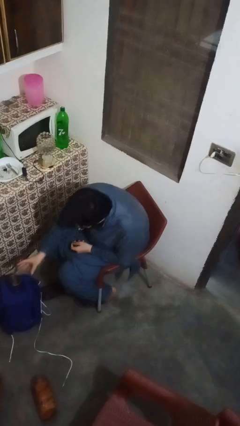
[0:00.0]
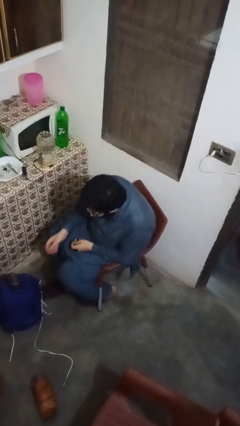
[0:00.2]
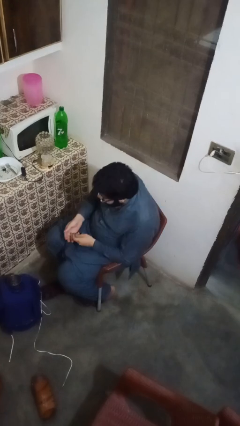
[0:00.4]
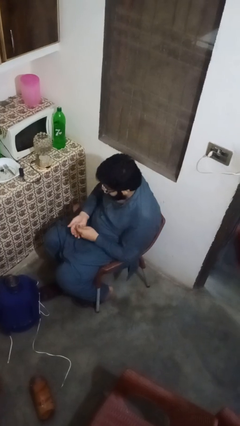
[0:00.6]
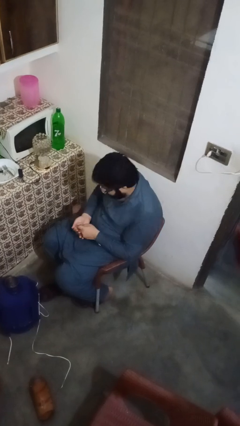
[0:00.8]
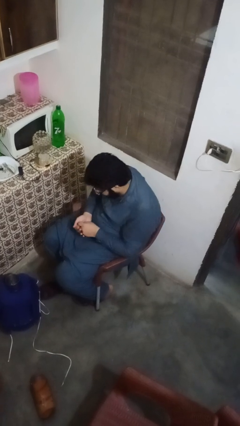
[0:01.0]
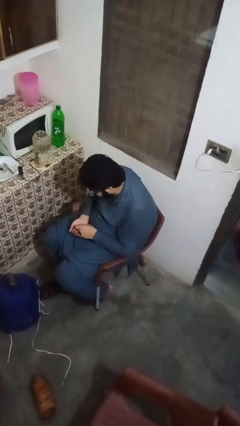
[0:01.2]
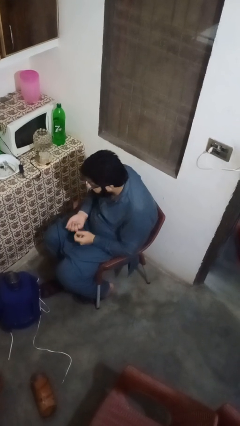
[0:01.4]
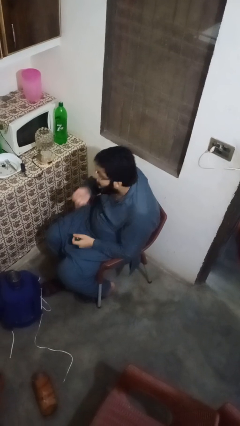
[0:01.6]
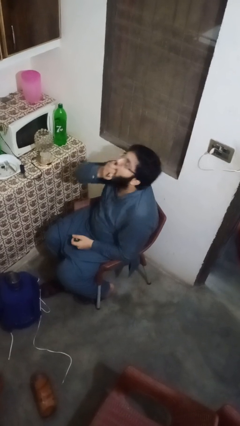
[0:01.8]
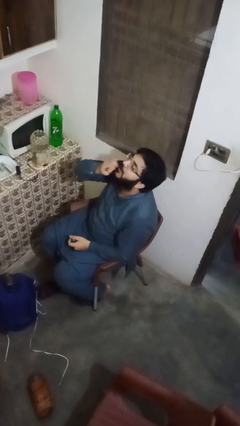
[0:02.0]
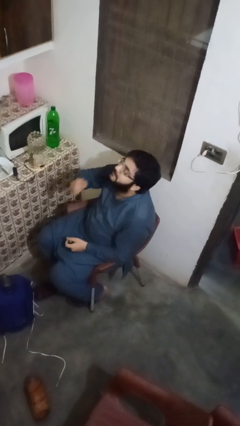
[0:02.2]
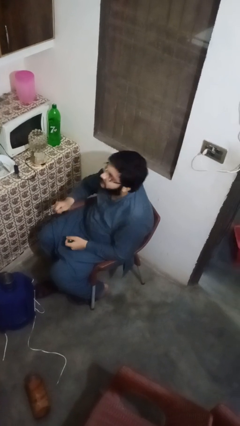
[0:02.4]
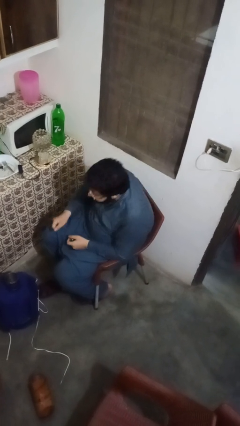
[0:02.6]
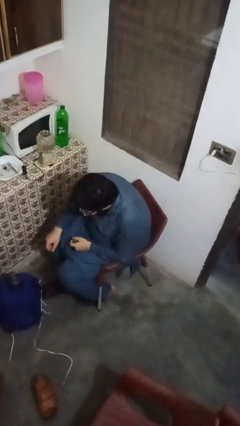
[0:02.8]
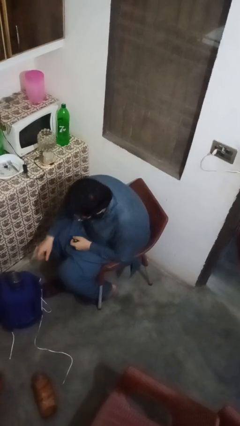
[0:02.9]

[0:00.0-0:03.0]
person takes medicine pills

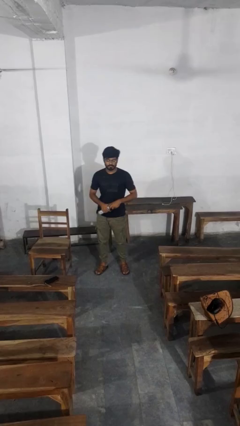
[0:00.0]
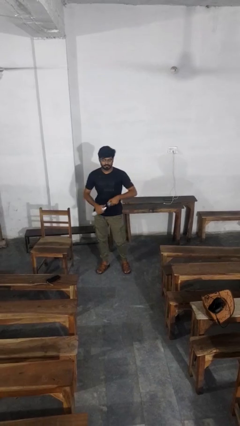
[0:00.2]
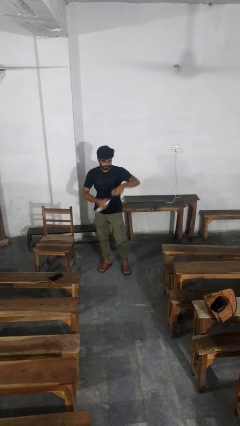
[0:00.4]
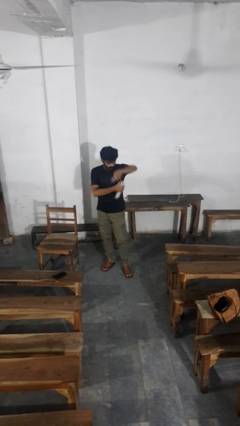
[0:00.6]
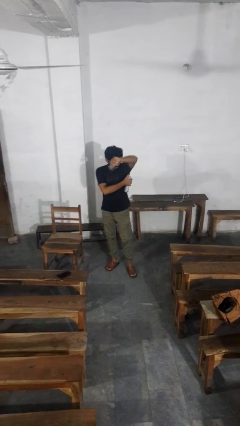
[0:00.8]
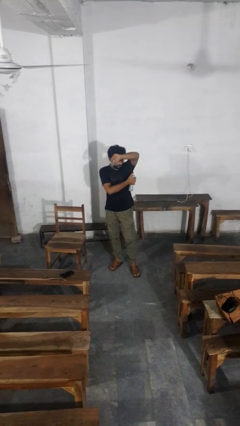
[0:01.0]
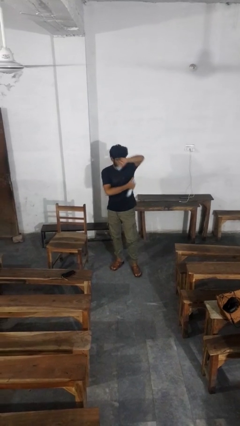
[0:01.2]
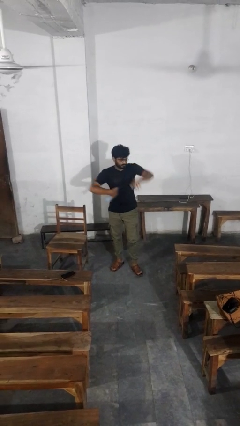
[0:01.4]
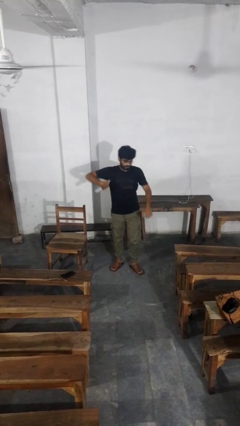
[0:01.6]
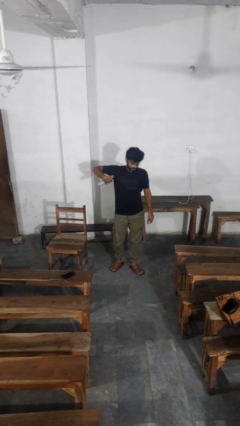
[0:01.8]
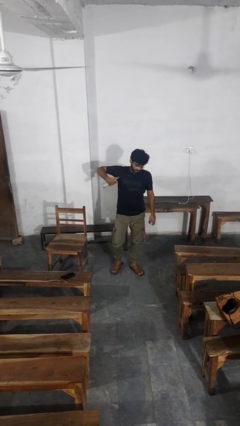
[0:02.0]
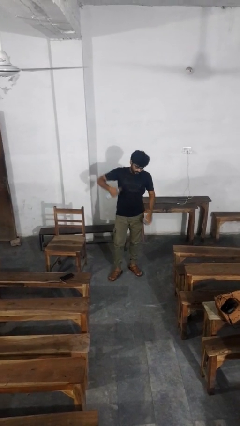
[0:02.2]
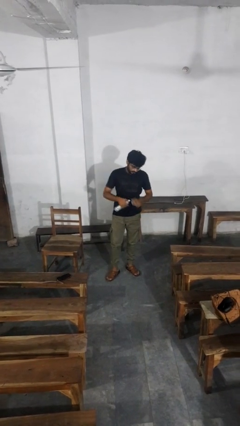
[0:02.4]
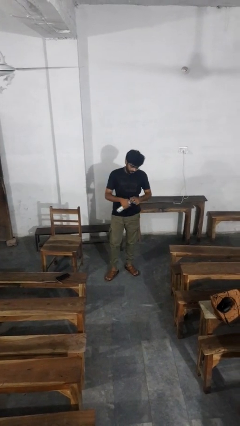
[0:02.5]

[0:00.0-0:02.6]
person applies deodorant

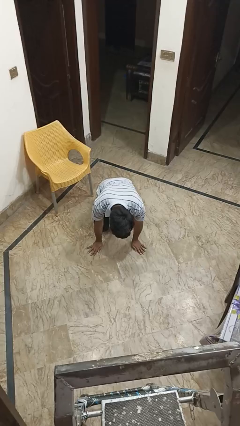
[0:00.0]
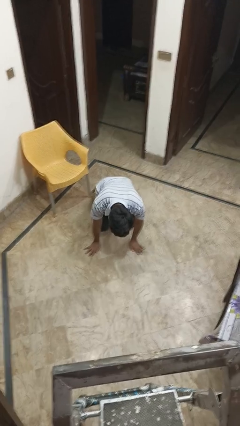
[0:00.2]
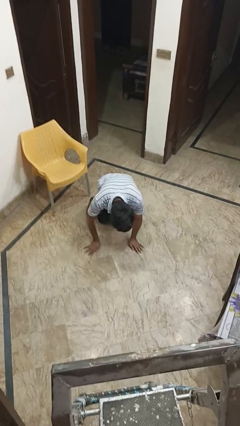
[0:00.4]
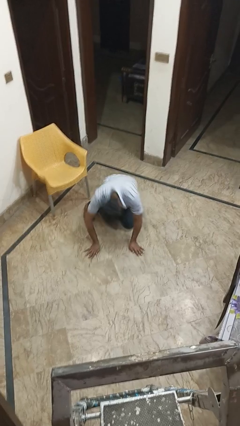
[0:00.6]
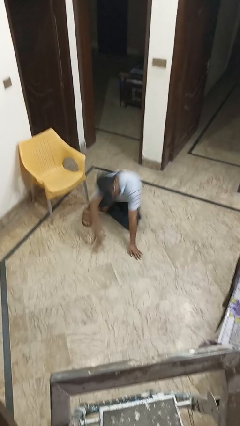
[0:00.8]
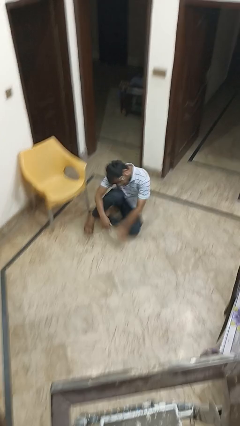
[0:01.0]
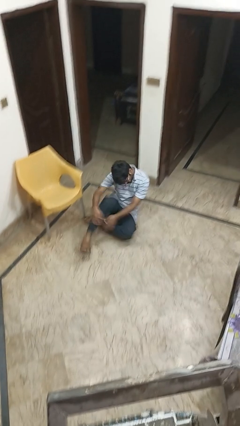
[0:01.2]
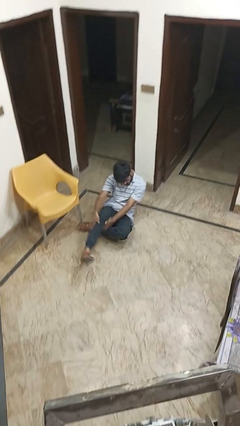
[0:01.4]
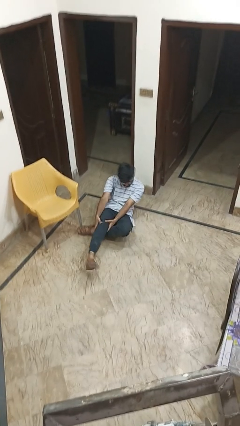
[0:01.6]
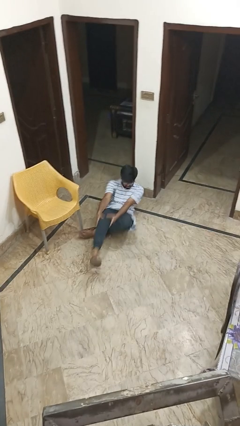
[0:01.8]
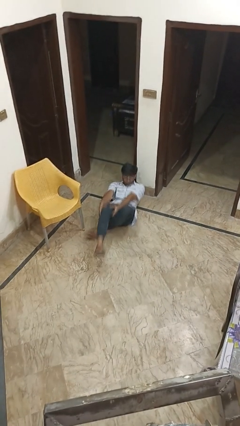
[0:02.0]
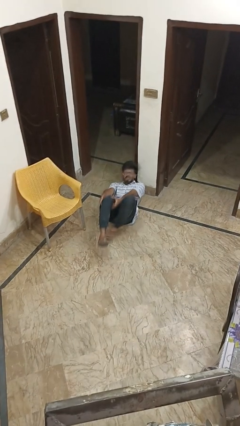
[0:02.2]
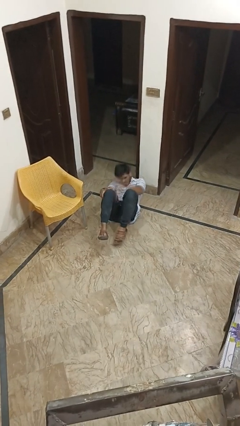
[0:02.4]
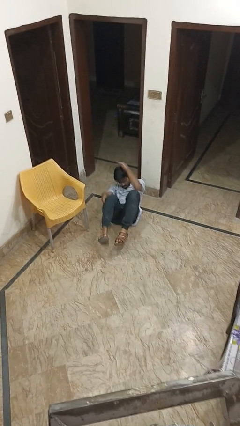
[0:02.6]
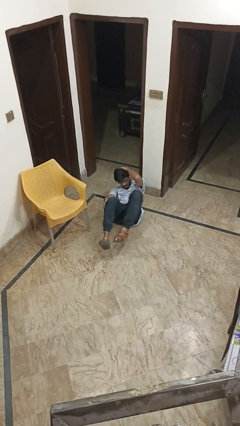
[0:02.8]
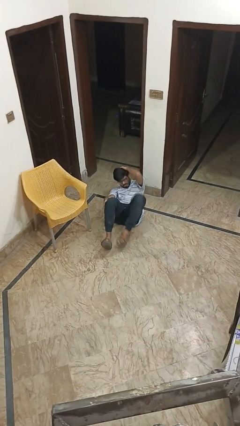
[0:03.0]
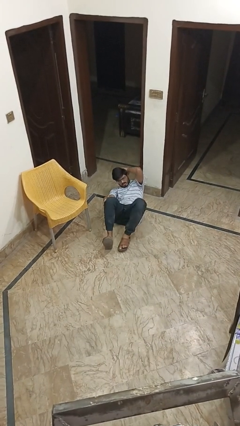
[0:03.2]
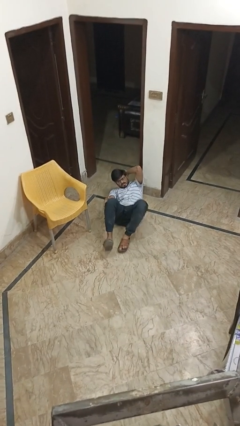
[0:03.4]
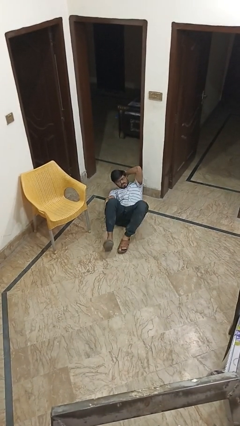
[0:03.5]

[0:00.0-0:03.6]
person lies down on floor

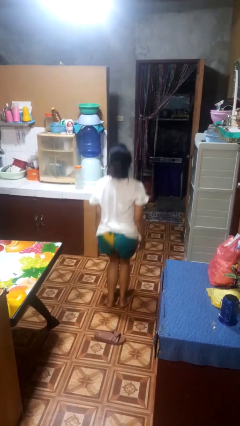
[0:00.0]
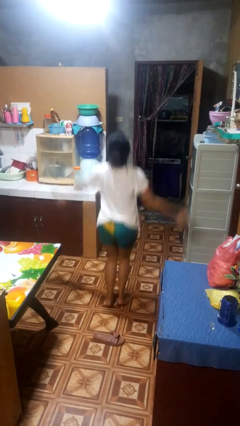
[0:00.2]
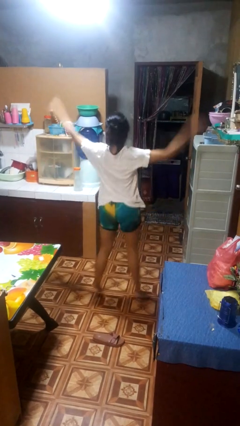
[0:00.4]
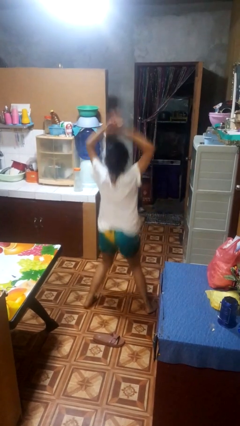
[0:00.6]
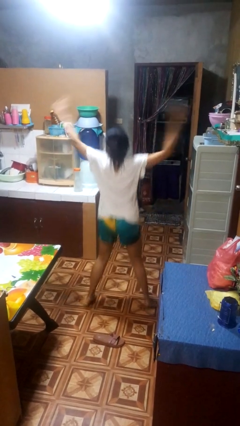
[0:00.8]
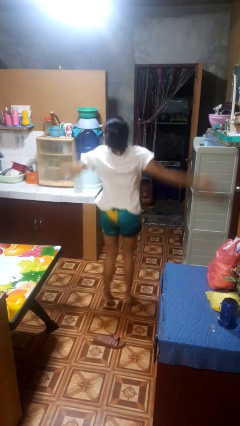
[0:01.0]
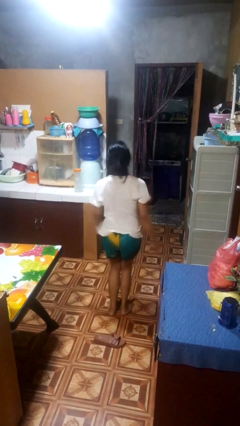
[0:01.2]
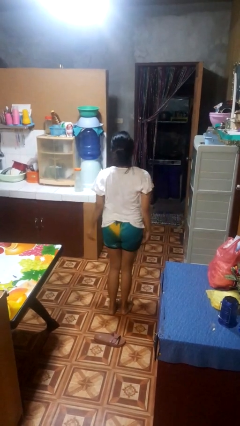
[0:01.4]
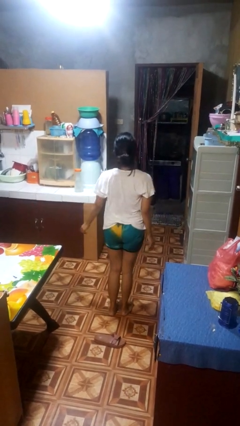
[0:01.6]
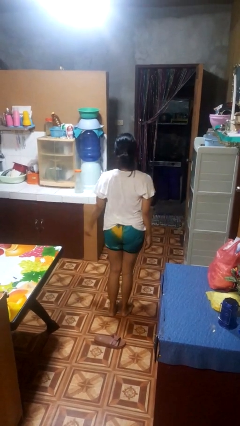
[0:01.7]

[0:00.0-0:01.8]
person exercises with jumping jacks

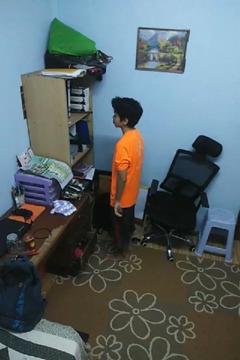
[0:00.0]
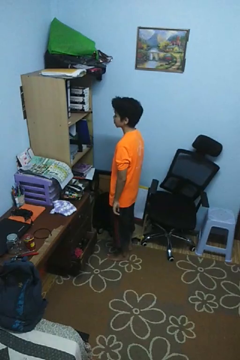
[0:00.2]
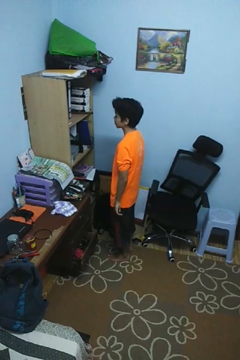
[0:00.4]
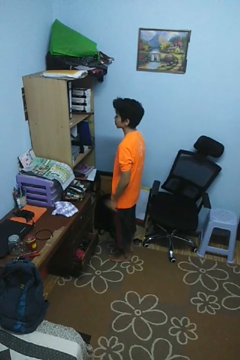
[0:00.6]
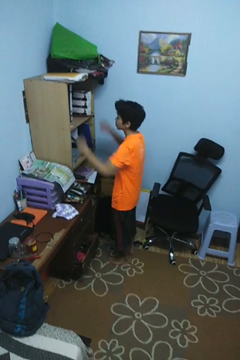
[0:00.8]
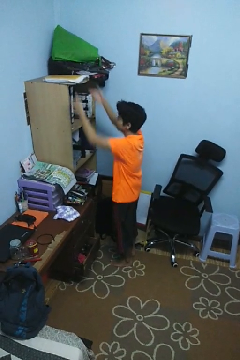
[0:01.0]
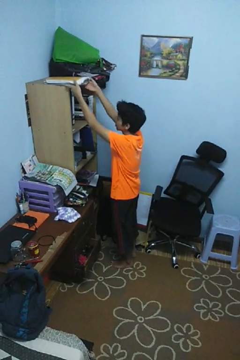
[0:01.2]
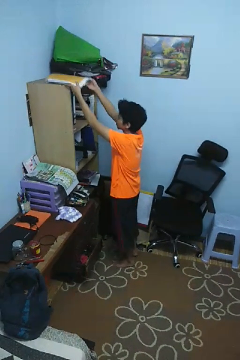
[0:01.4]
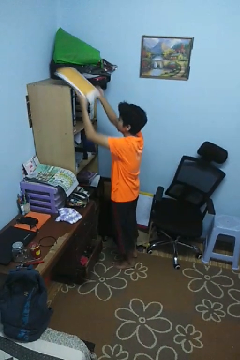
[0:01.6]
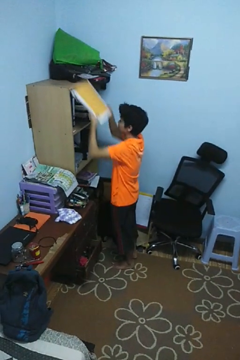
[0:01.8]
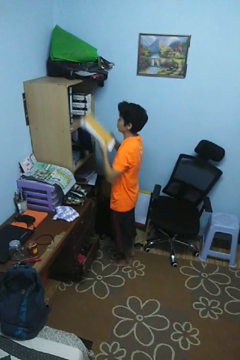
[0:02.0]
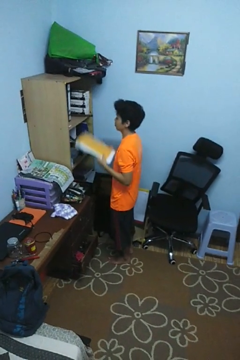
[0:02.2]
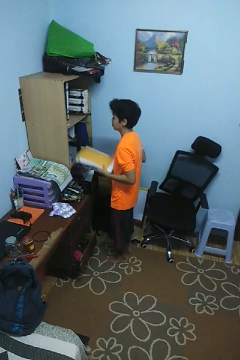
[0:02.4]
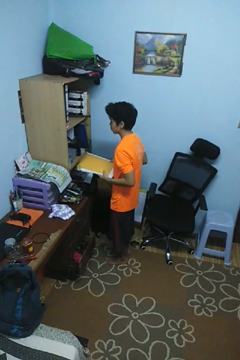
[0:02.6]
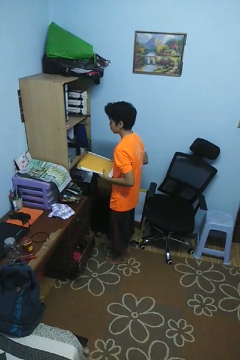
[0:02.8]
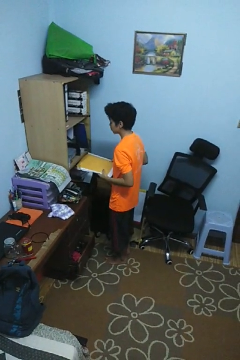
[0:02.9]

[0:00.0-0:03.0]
person picks up object from shelf

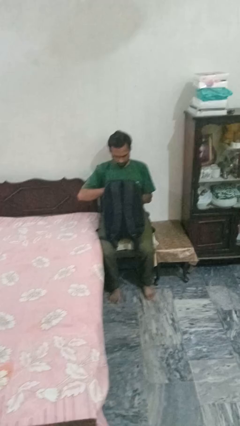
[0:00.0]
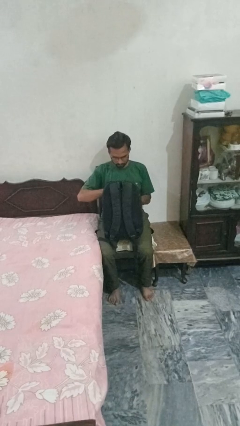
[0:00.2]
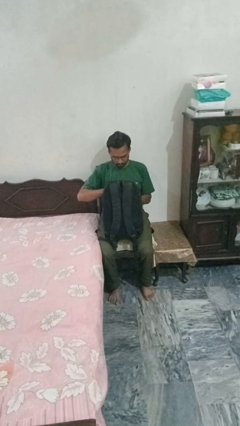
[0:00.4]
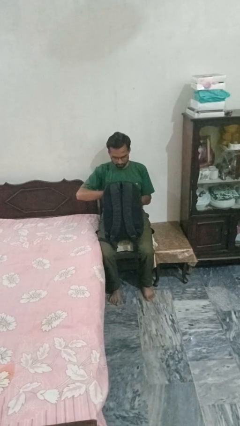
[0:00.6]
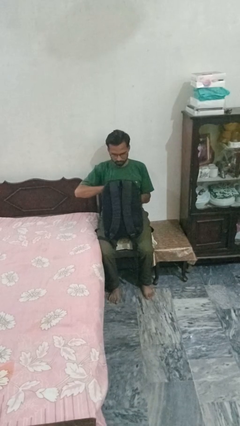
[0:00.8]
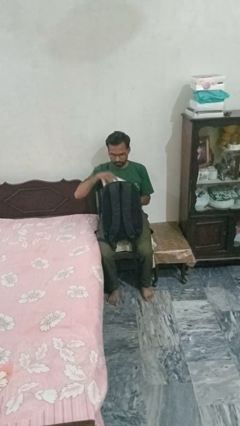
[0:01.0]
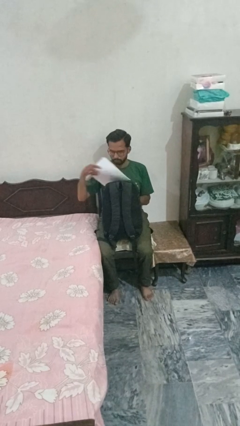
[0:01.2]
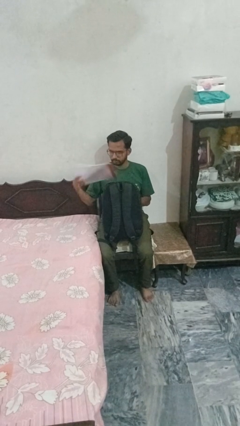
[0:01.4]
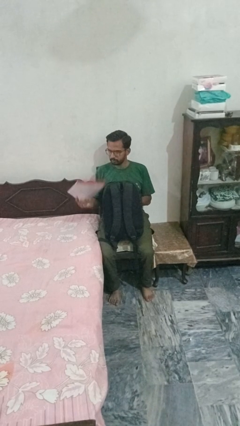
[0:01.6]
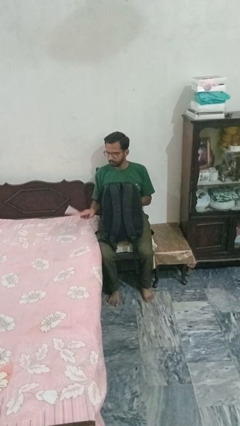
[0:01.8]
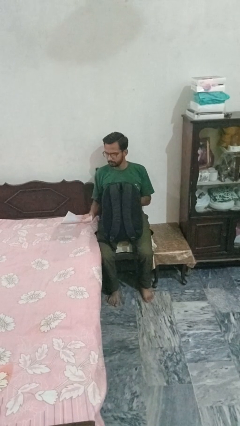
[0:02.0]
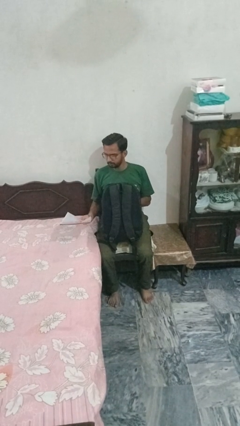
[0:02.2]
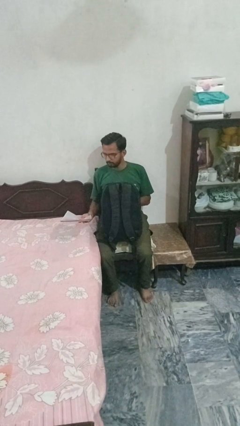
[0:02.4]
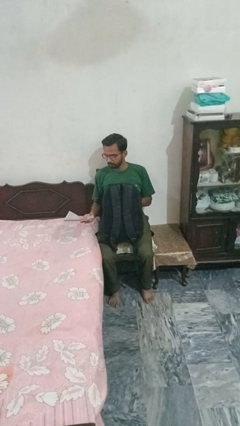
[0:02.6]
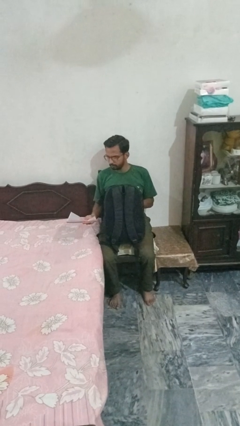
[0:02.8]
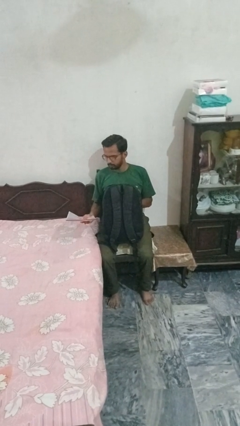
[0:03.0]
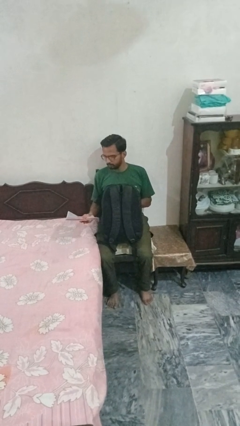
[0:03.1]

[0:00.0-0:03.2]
person takes object from backpack

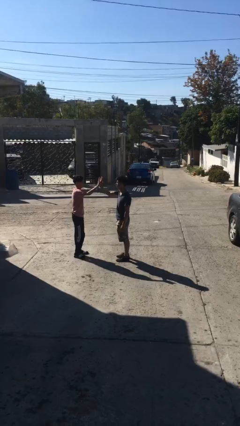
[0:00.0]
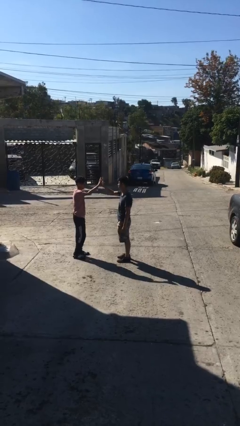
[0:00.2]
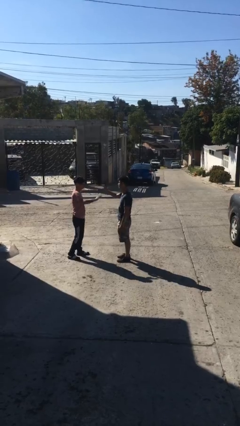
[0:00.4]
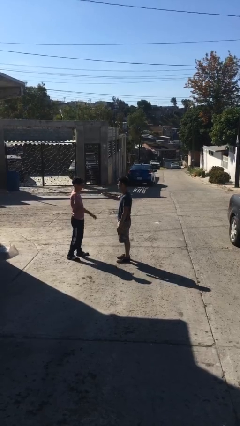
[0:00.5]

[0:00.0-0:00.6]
person highfives hand
